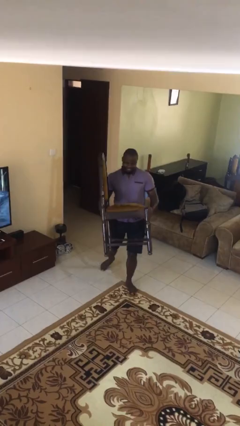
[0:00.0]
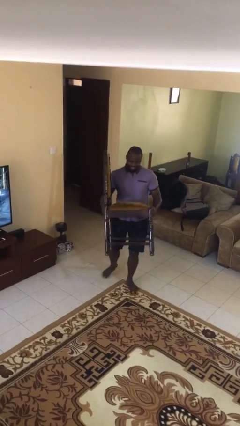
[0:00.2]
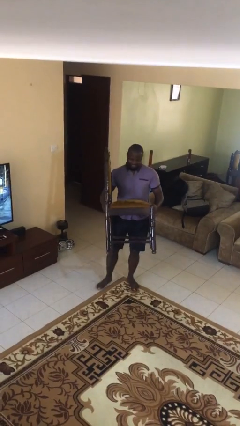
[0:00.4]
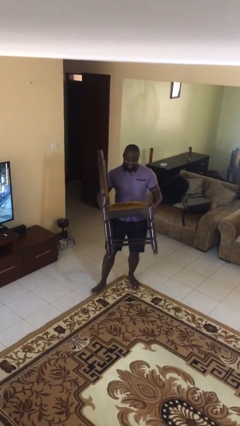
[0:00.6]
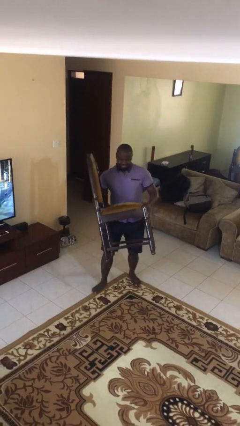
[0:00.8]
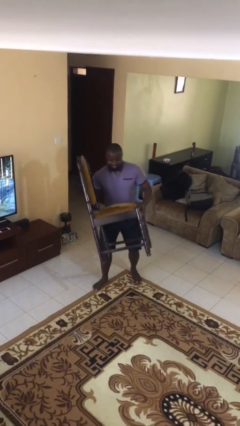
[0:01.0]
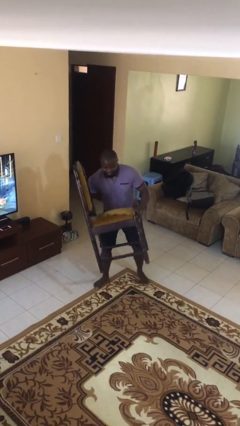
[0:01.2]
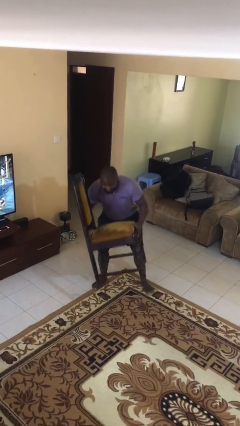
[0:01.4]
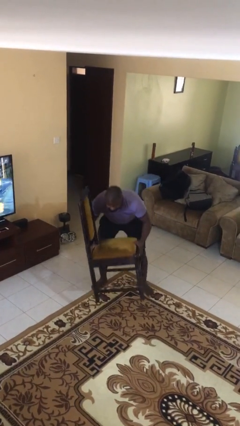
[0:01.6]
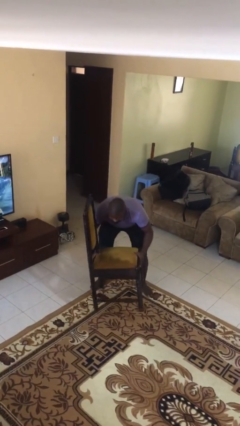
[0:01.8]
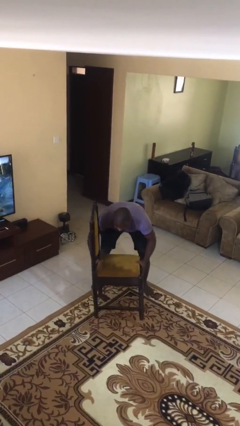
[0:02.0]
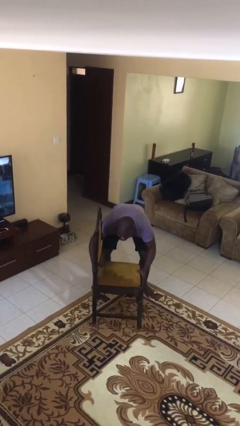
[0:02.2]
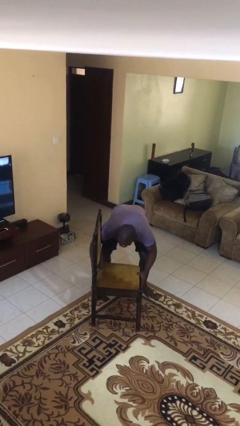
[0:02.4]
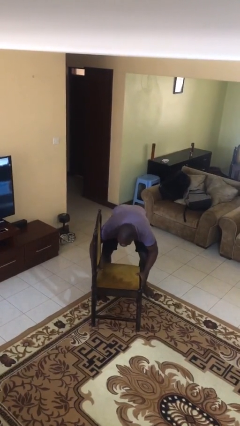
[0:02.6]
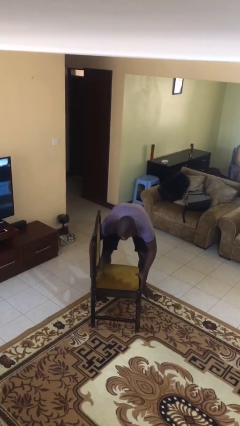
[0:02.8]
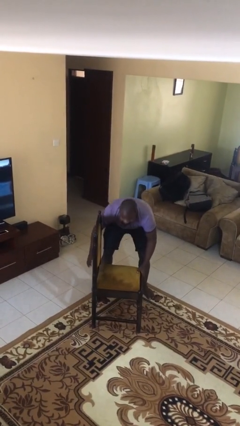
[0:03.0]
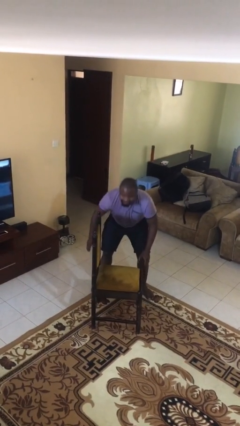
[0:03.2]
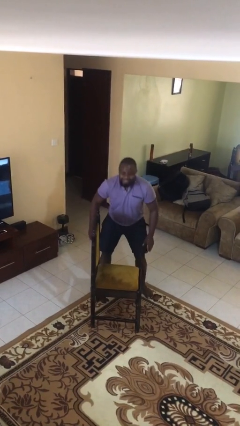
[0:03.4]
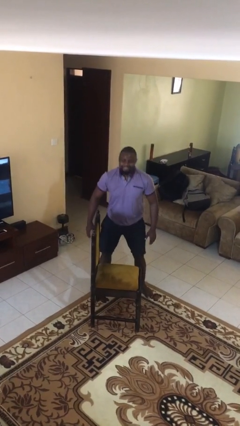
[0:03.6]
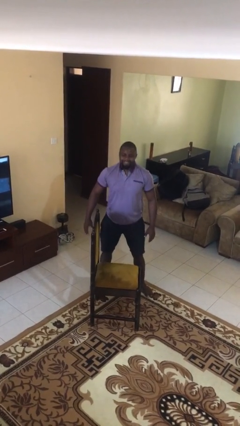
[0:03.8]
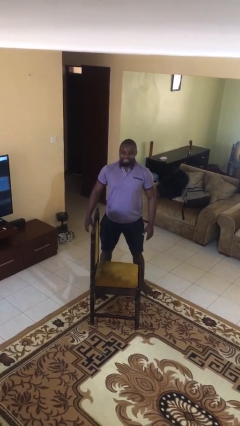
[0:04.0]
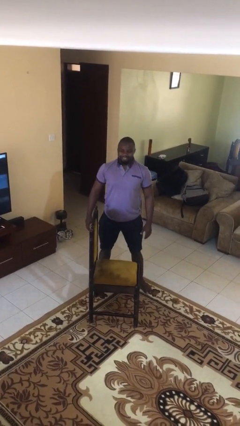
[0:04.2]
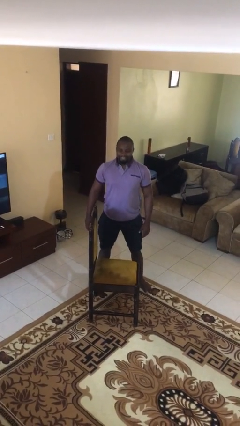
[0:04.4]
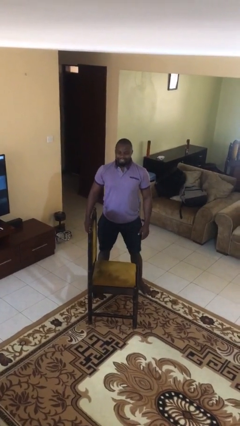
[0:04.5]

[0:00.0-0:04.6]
person puts down object on floor

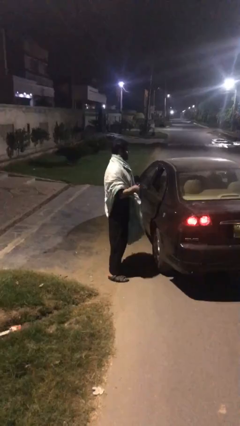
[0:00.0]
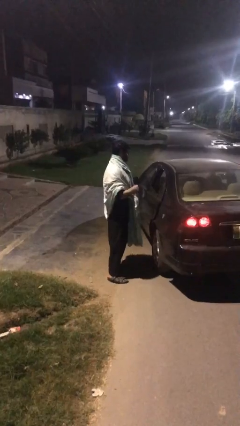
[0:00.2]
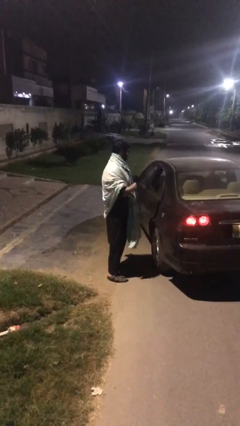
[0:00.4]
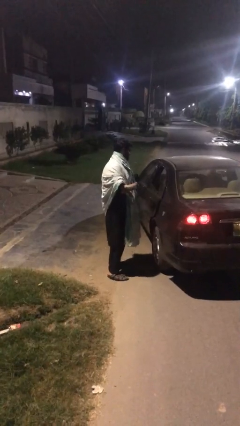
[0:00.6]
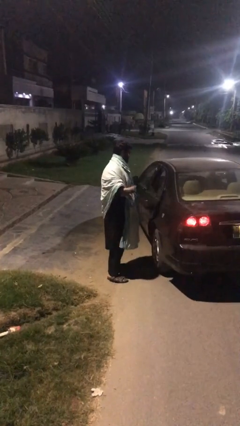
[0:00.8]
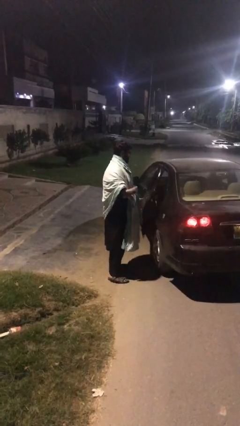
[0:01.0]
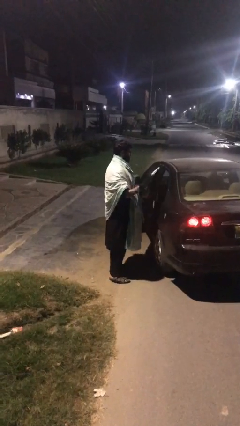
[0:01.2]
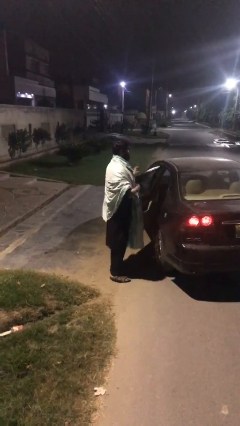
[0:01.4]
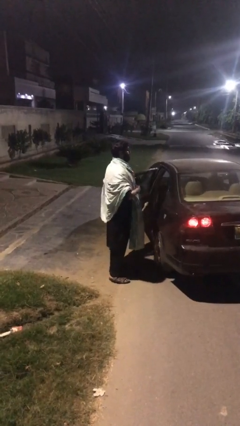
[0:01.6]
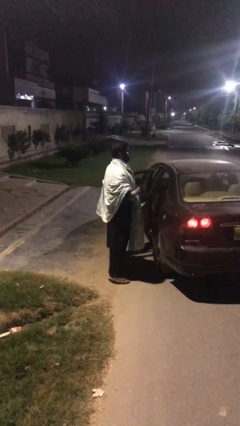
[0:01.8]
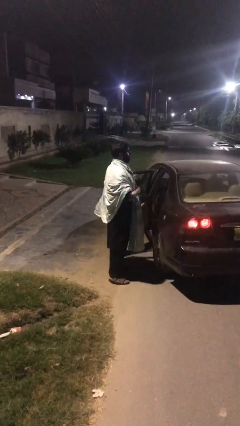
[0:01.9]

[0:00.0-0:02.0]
person opens car door

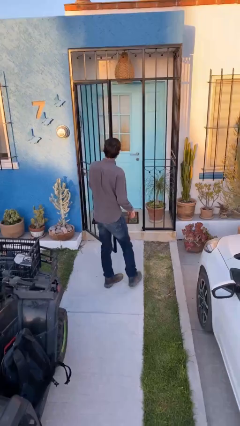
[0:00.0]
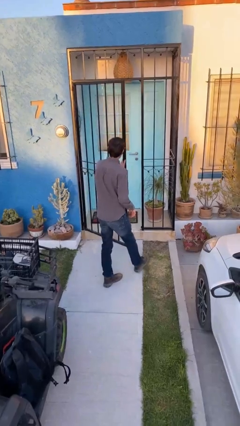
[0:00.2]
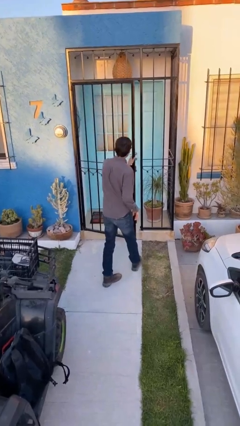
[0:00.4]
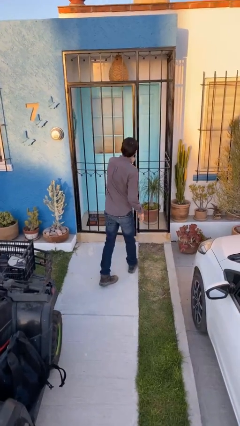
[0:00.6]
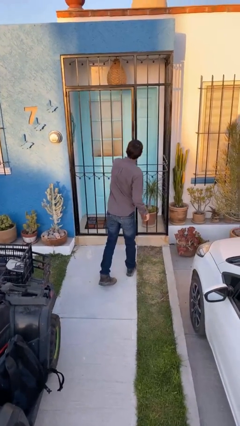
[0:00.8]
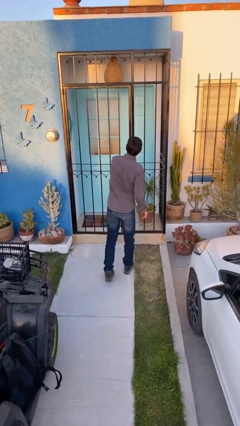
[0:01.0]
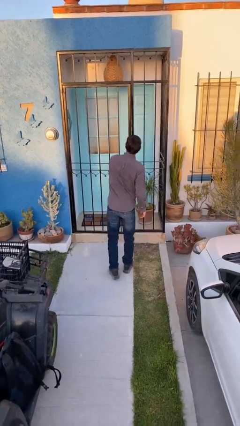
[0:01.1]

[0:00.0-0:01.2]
person closes facility door

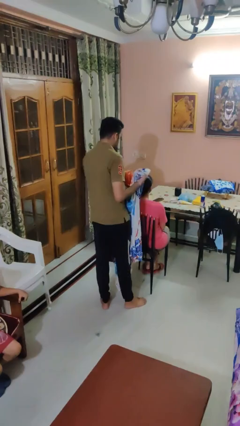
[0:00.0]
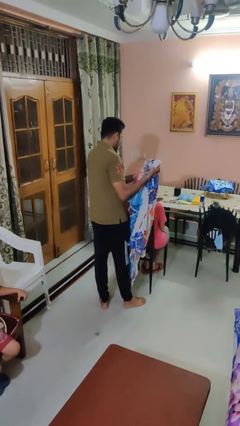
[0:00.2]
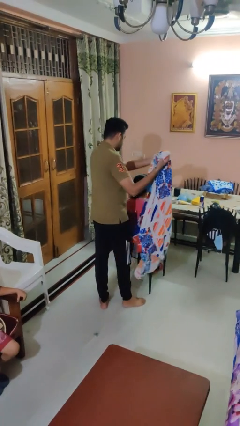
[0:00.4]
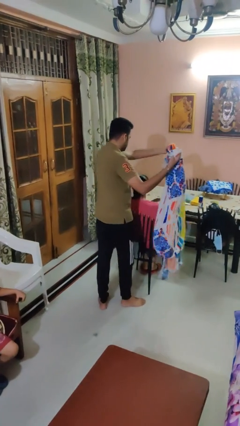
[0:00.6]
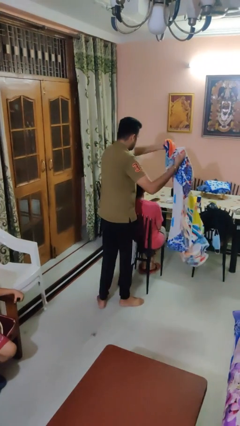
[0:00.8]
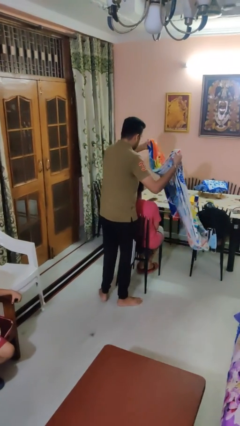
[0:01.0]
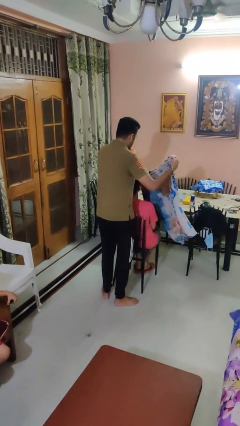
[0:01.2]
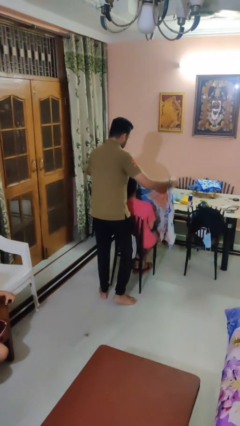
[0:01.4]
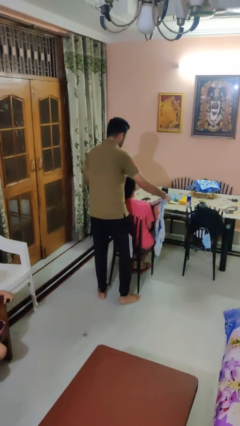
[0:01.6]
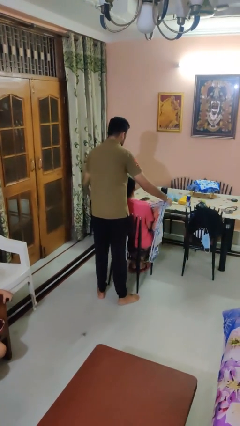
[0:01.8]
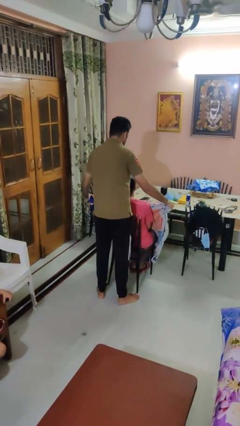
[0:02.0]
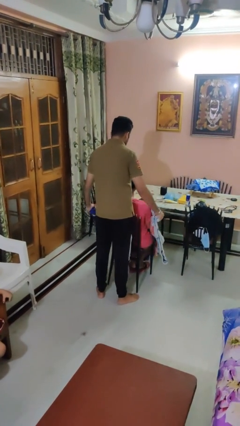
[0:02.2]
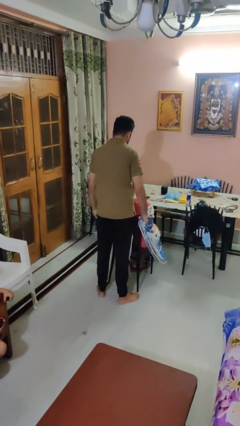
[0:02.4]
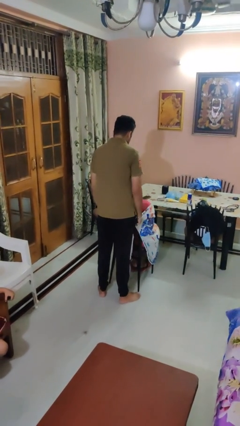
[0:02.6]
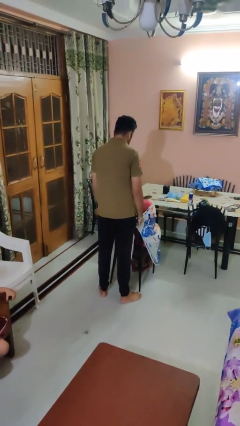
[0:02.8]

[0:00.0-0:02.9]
person covers friend with blanket

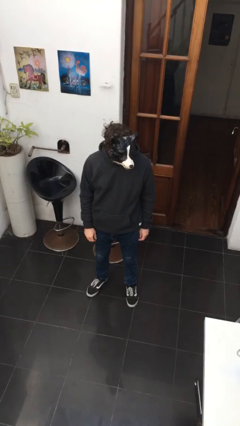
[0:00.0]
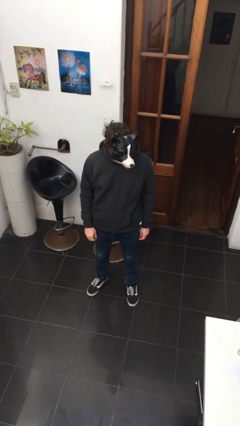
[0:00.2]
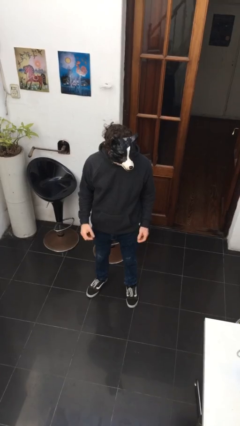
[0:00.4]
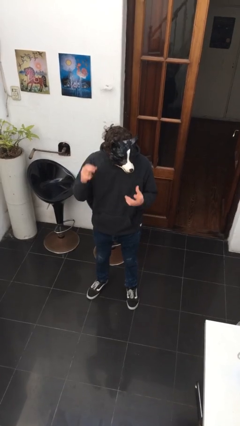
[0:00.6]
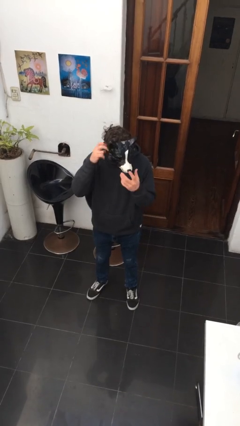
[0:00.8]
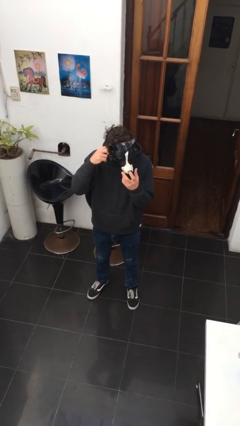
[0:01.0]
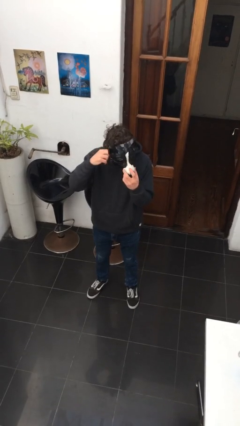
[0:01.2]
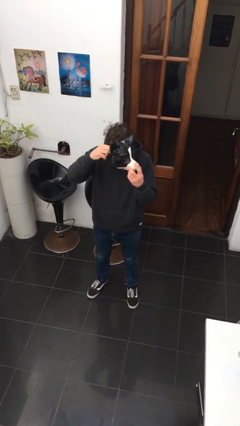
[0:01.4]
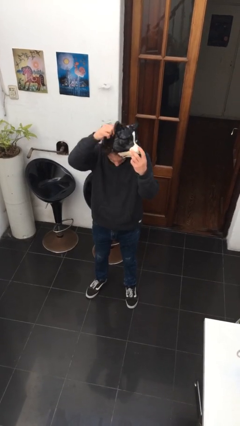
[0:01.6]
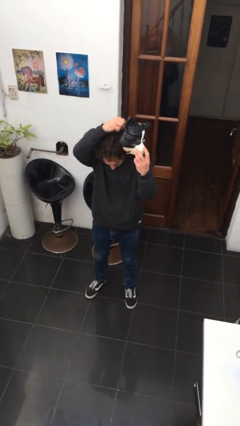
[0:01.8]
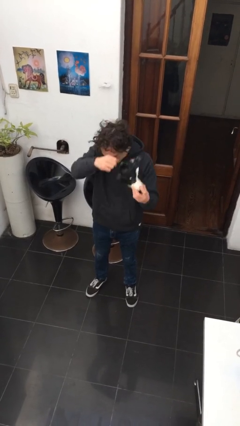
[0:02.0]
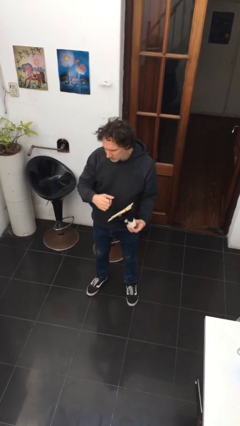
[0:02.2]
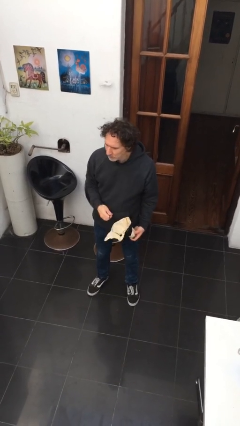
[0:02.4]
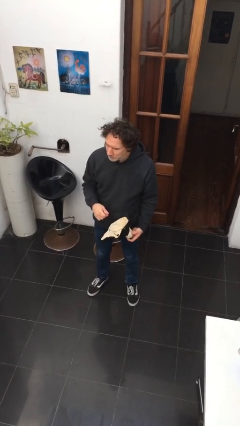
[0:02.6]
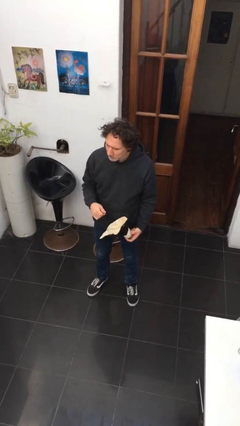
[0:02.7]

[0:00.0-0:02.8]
person takes off facemask

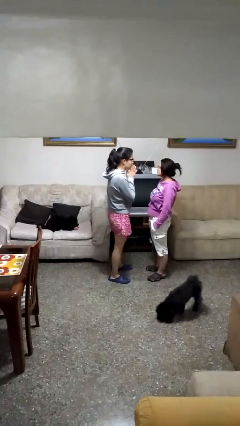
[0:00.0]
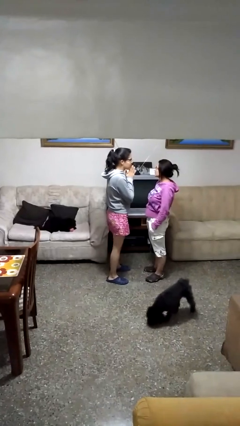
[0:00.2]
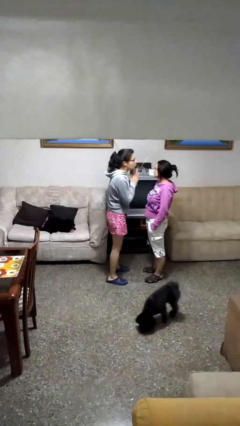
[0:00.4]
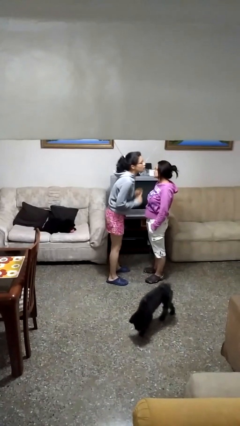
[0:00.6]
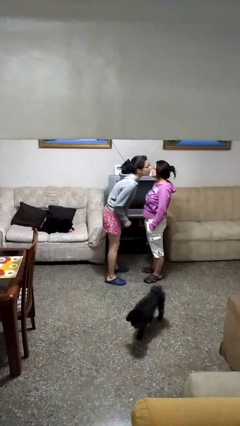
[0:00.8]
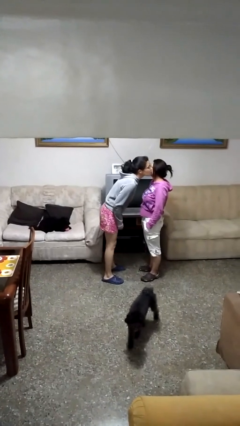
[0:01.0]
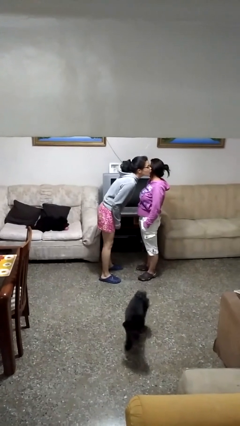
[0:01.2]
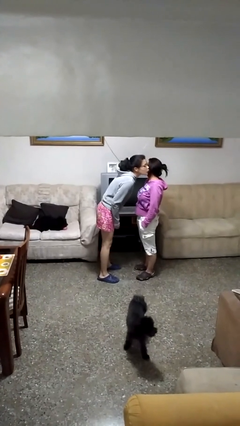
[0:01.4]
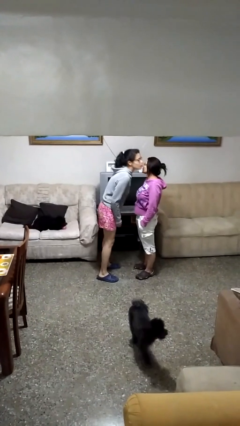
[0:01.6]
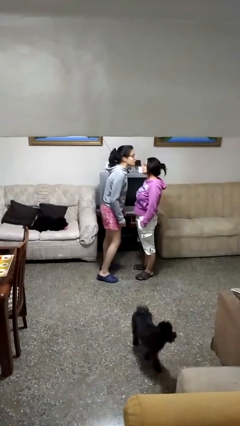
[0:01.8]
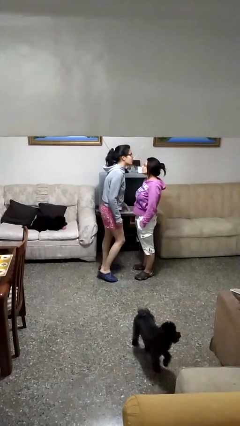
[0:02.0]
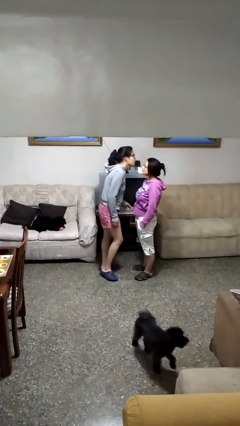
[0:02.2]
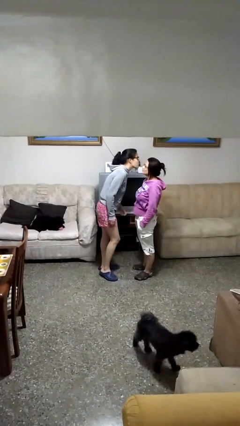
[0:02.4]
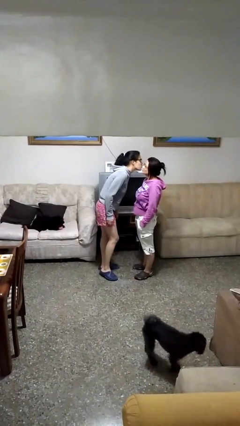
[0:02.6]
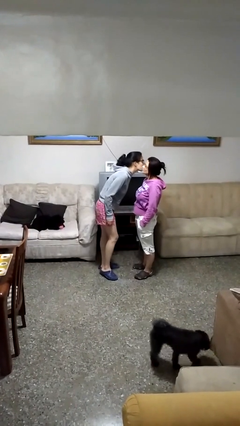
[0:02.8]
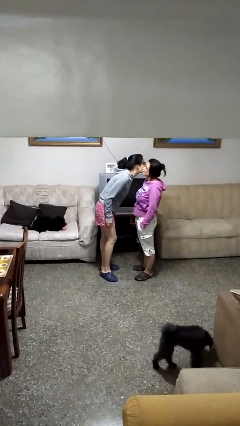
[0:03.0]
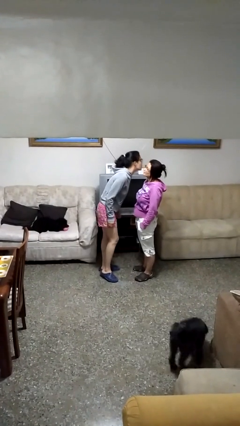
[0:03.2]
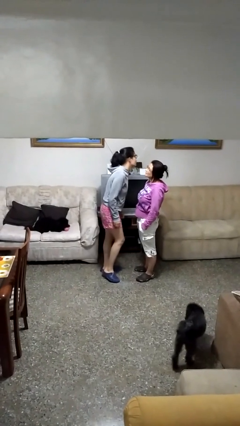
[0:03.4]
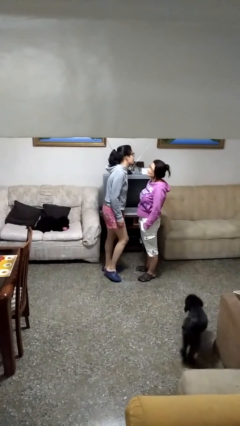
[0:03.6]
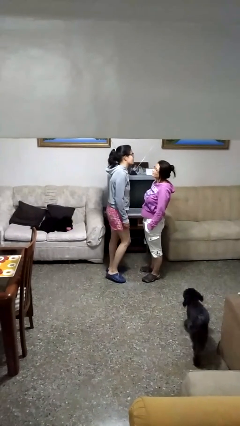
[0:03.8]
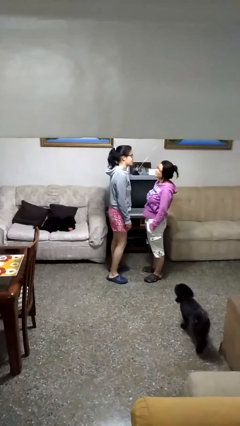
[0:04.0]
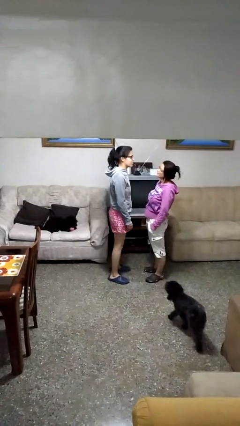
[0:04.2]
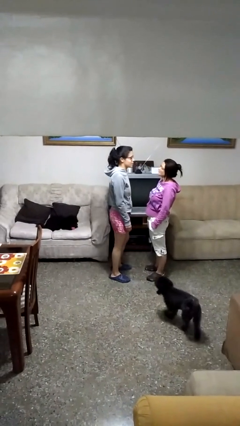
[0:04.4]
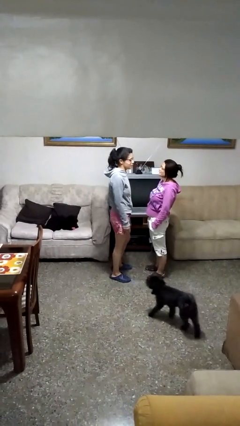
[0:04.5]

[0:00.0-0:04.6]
person kisses cheek of person
